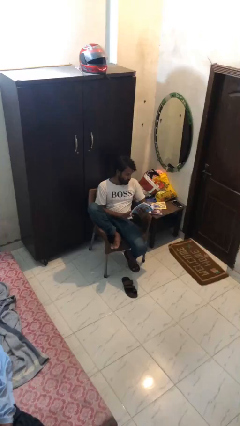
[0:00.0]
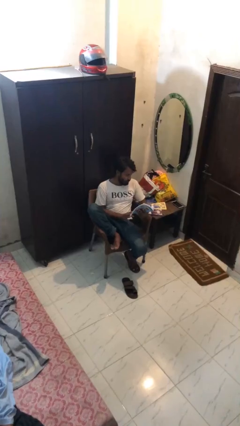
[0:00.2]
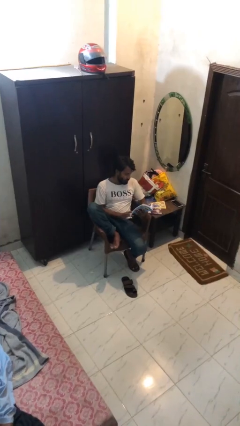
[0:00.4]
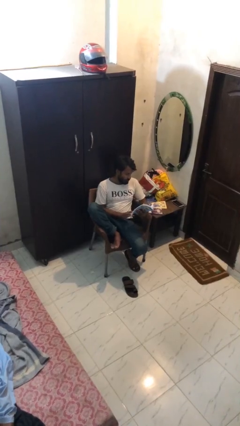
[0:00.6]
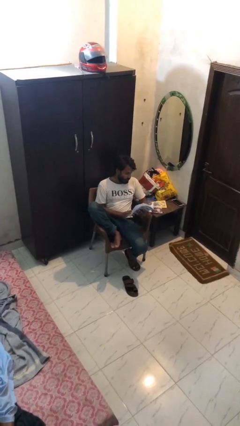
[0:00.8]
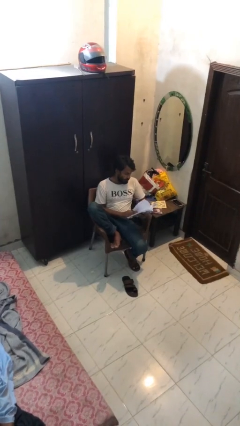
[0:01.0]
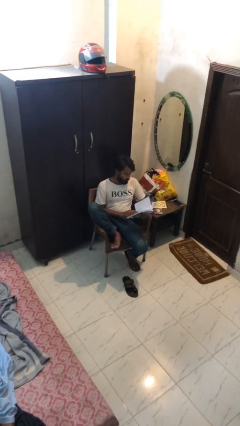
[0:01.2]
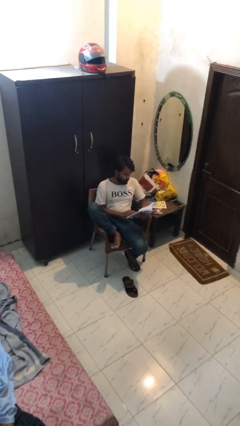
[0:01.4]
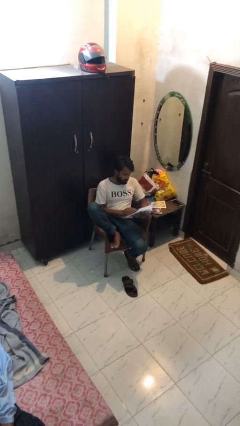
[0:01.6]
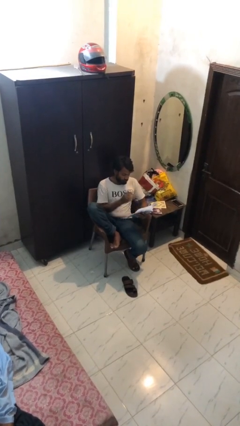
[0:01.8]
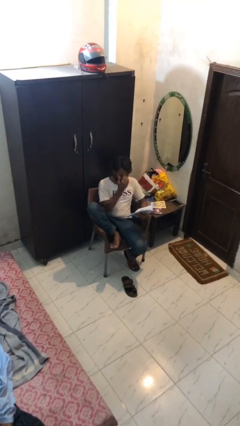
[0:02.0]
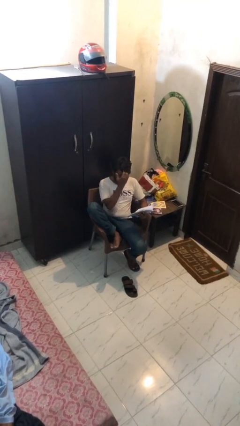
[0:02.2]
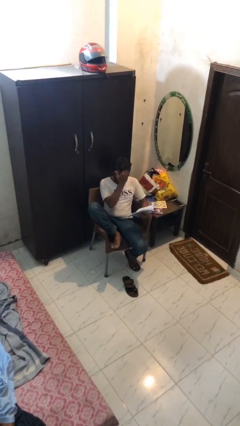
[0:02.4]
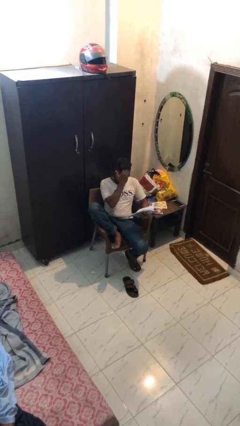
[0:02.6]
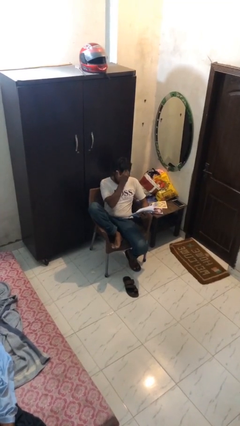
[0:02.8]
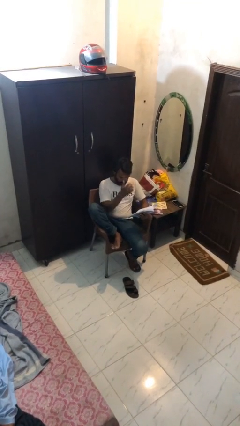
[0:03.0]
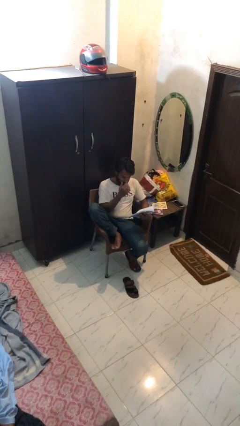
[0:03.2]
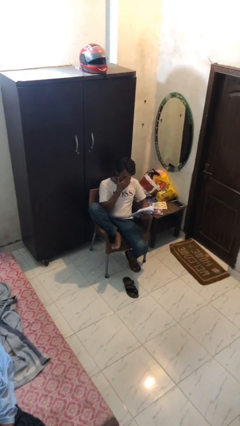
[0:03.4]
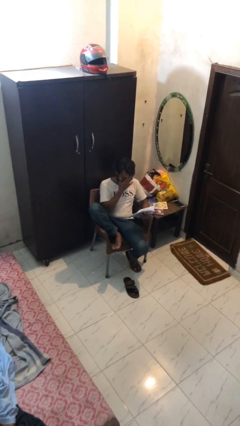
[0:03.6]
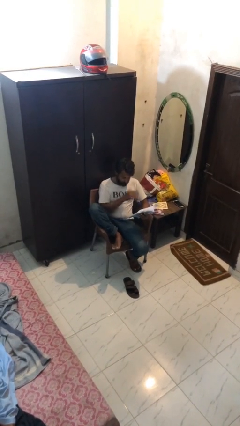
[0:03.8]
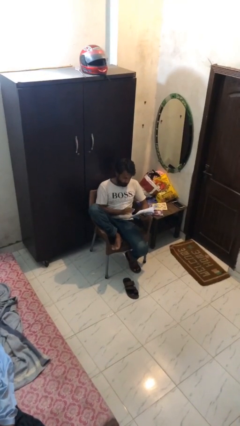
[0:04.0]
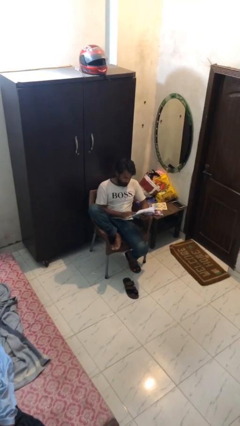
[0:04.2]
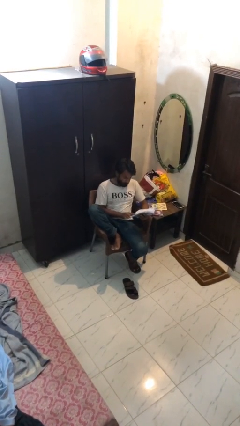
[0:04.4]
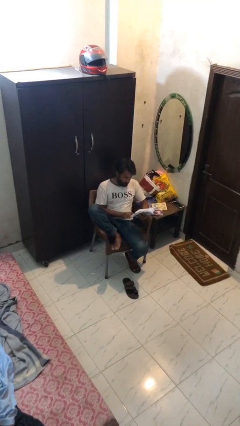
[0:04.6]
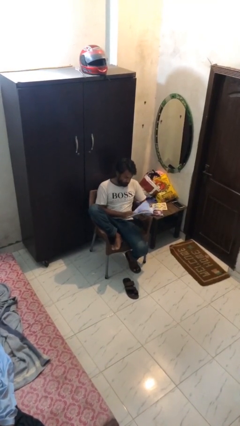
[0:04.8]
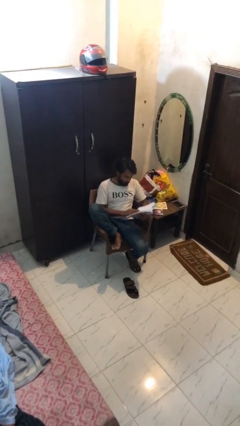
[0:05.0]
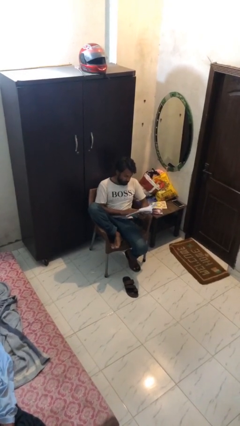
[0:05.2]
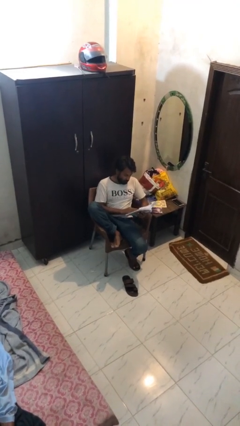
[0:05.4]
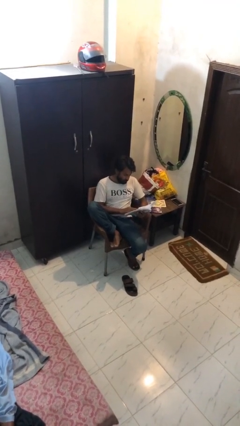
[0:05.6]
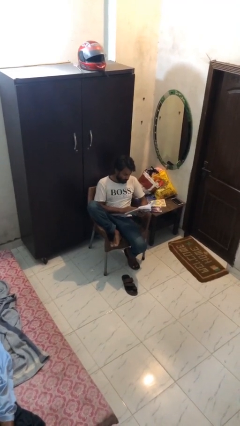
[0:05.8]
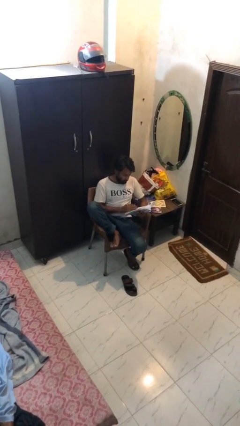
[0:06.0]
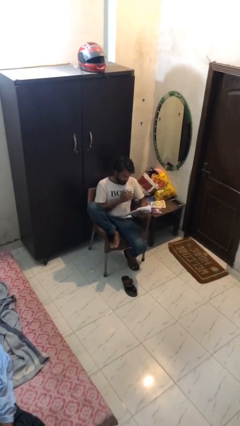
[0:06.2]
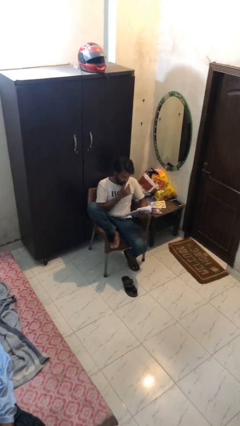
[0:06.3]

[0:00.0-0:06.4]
person reads document

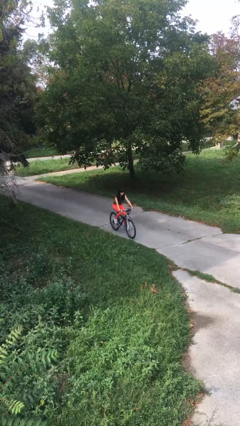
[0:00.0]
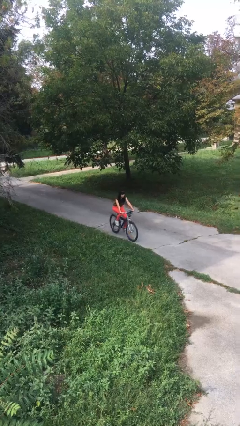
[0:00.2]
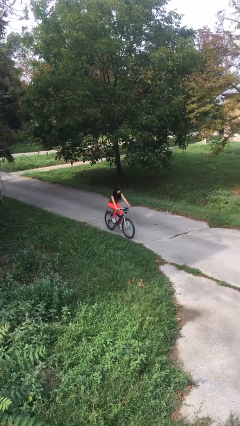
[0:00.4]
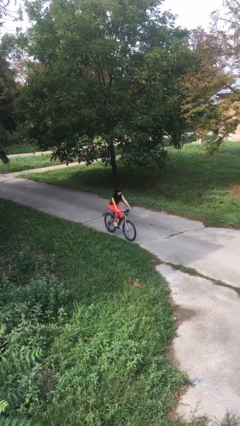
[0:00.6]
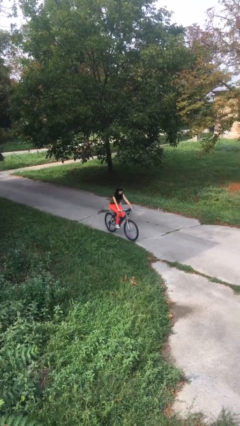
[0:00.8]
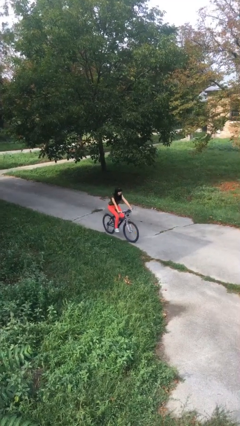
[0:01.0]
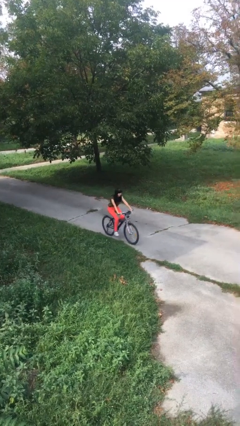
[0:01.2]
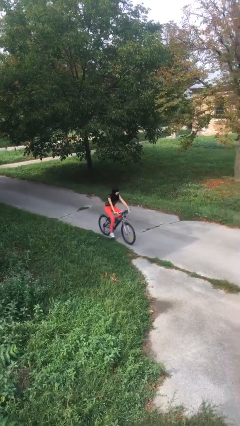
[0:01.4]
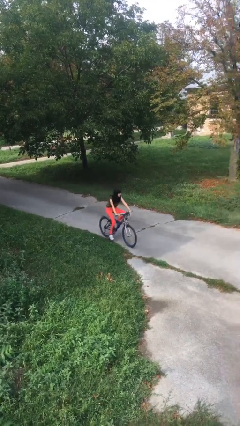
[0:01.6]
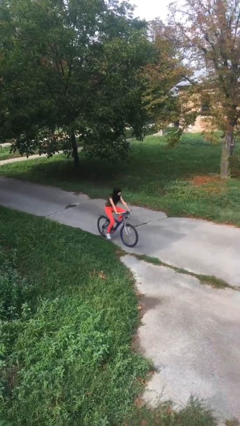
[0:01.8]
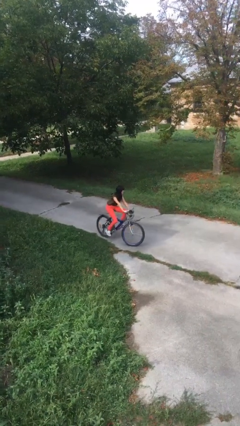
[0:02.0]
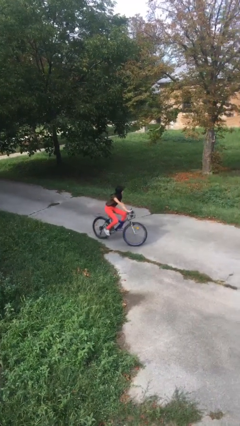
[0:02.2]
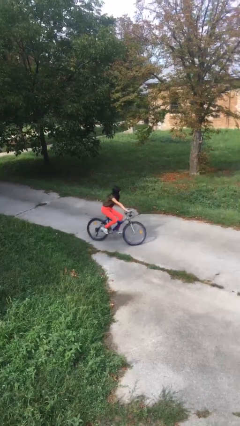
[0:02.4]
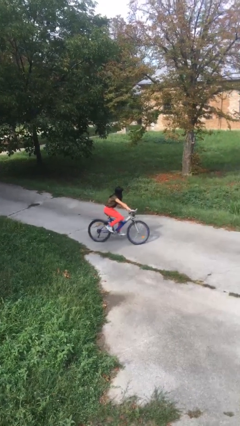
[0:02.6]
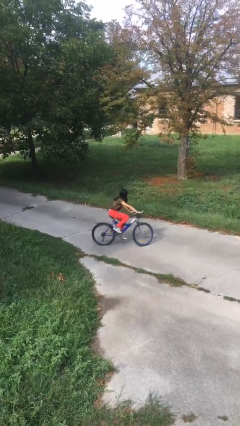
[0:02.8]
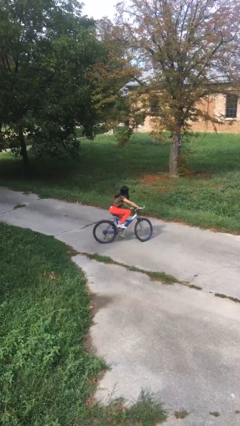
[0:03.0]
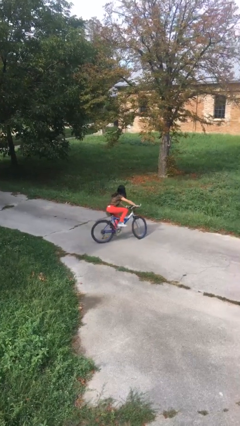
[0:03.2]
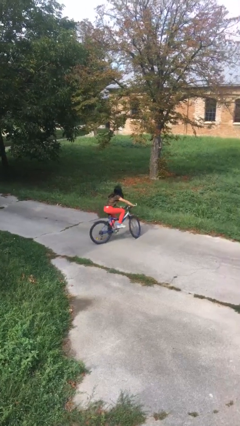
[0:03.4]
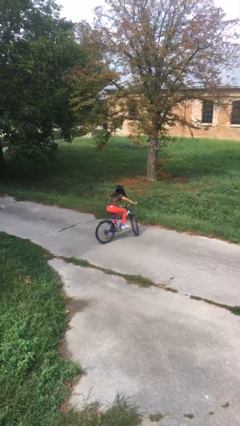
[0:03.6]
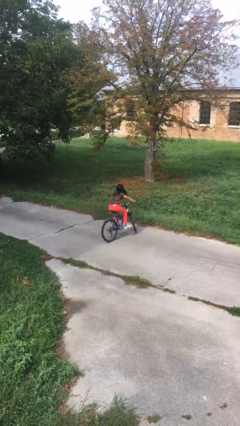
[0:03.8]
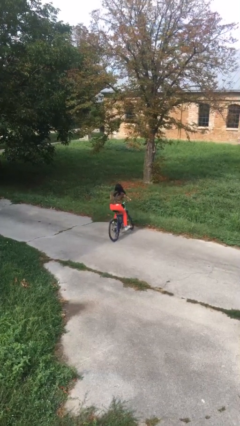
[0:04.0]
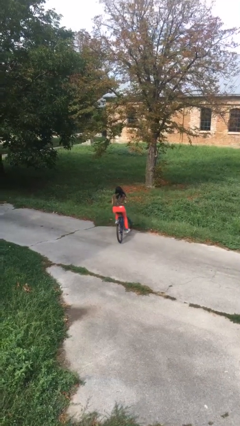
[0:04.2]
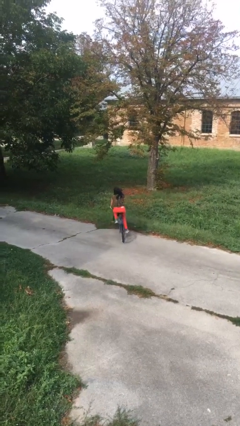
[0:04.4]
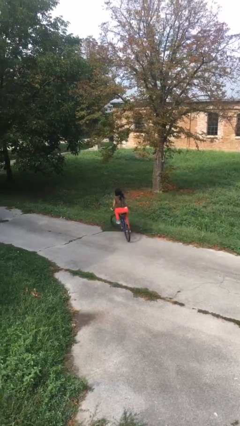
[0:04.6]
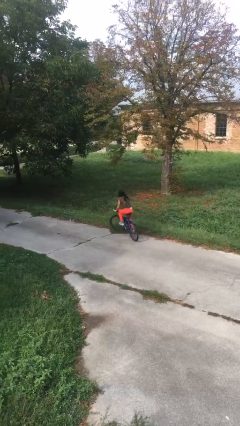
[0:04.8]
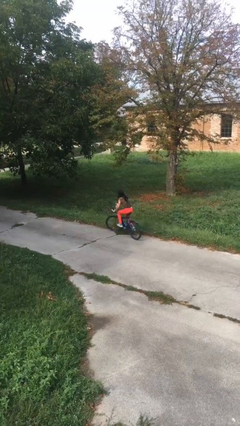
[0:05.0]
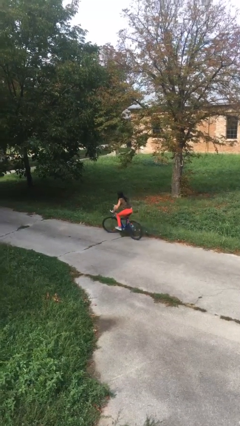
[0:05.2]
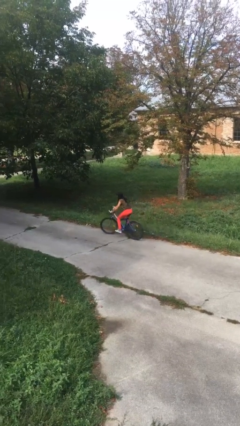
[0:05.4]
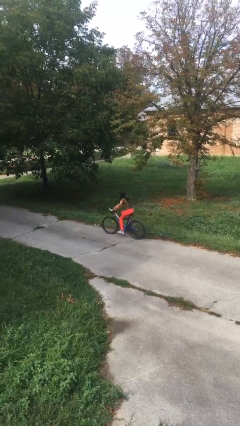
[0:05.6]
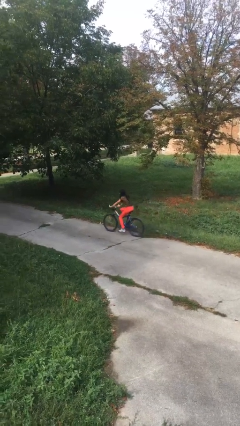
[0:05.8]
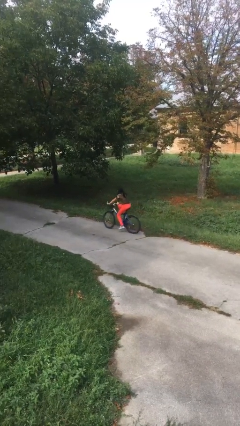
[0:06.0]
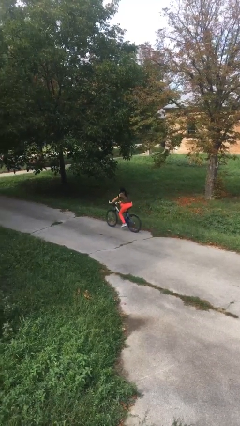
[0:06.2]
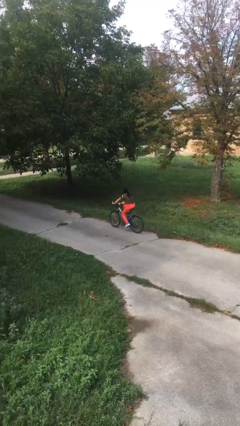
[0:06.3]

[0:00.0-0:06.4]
person rides bicycle

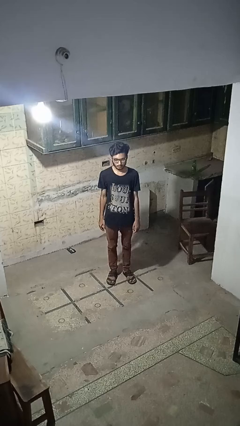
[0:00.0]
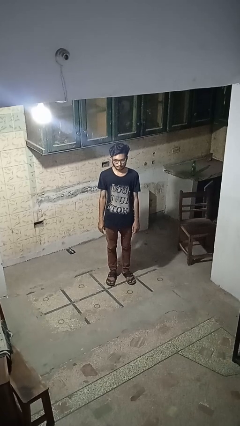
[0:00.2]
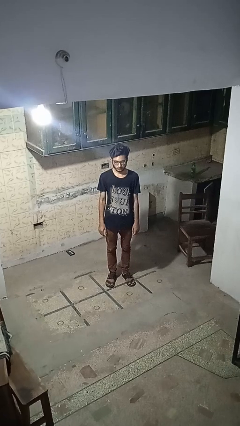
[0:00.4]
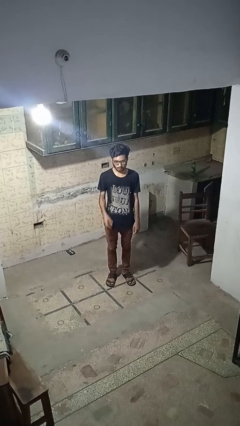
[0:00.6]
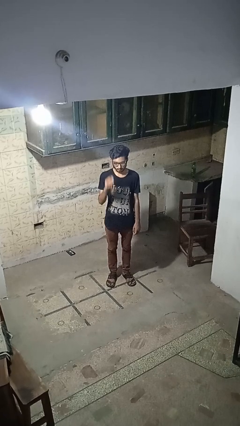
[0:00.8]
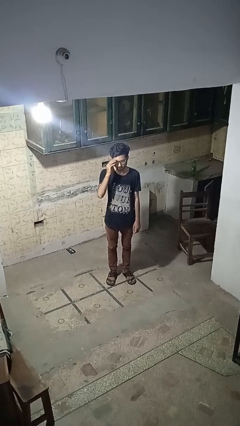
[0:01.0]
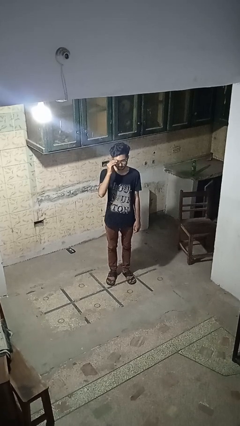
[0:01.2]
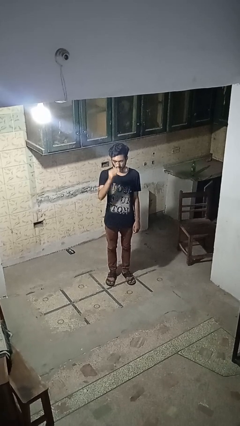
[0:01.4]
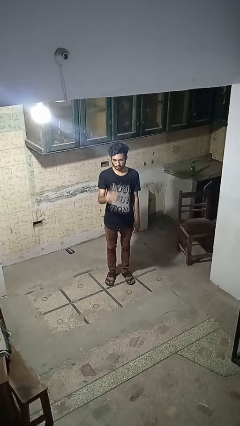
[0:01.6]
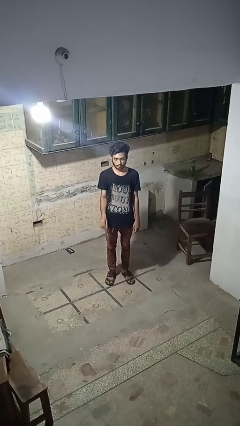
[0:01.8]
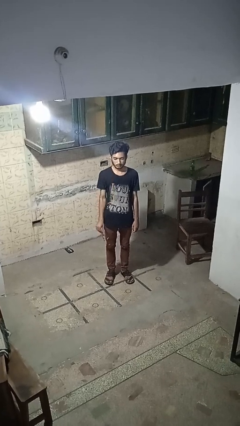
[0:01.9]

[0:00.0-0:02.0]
person takes off glasses

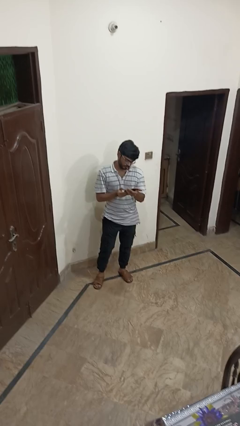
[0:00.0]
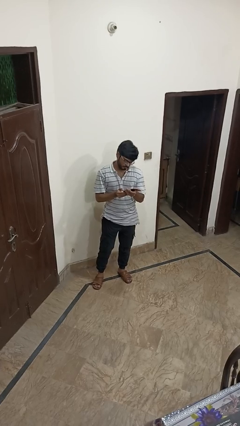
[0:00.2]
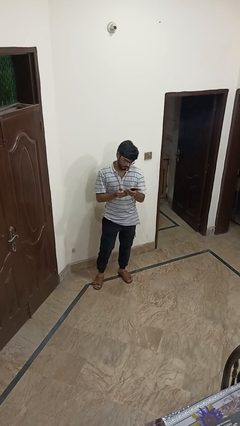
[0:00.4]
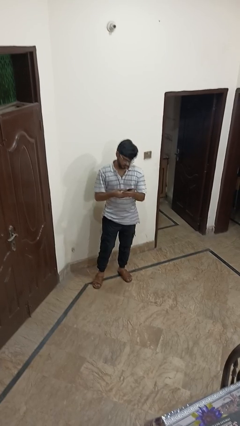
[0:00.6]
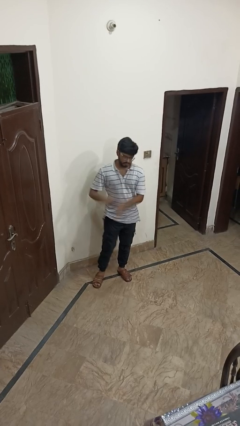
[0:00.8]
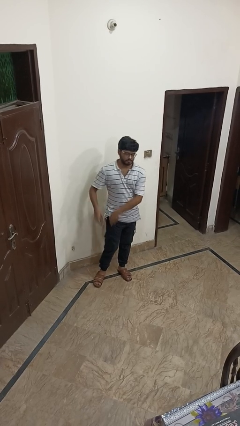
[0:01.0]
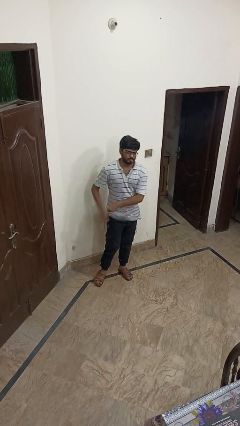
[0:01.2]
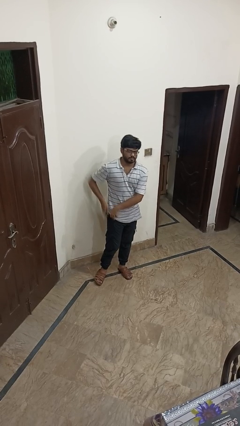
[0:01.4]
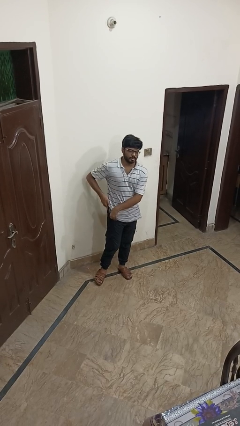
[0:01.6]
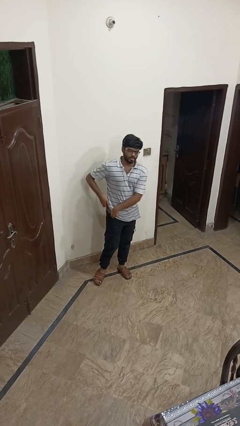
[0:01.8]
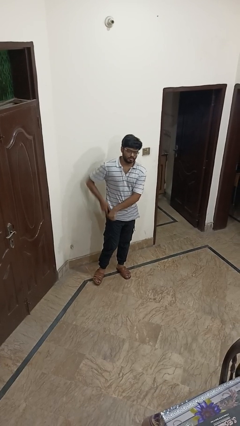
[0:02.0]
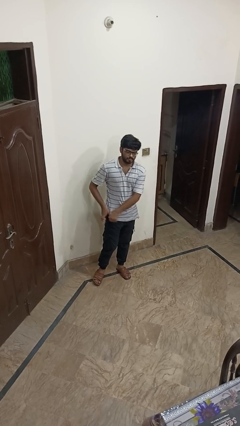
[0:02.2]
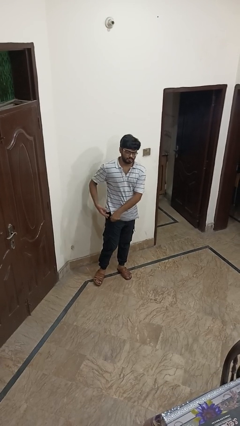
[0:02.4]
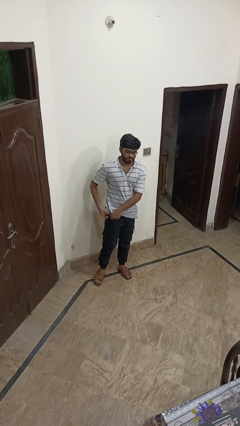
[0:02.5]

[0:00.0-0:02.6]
person puts phone into pocket
